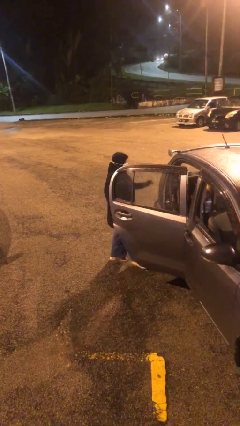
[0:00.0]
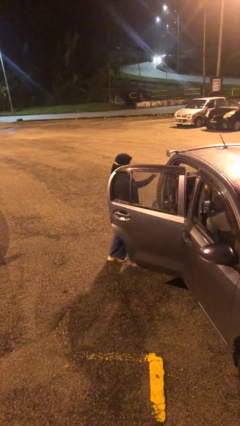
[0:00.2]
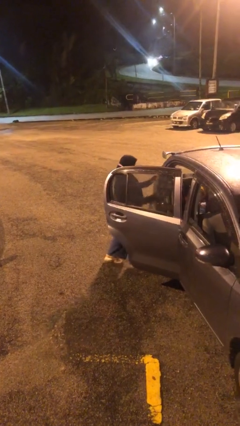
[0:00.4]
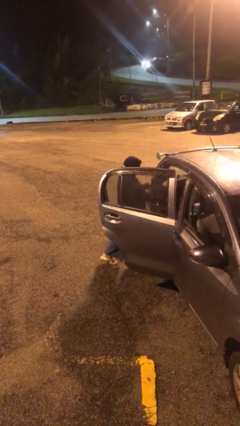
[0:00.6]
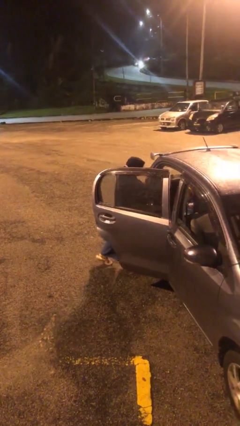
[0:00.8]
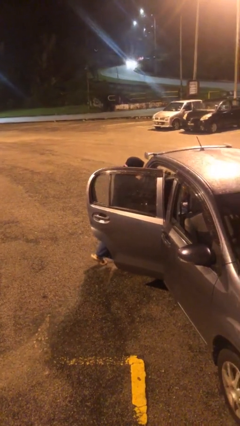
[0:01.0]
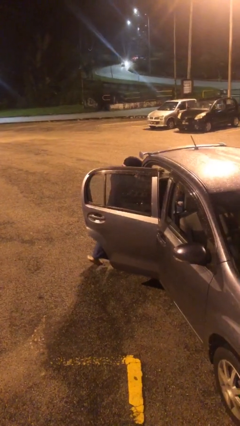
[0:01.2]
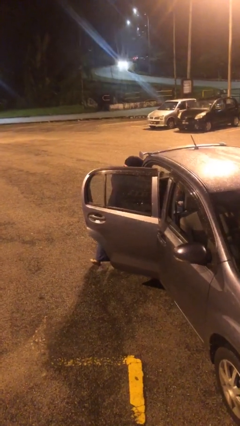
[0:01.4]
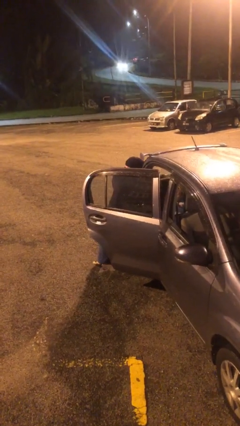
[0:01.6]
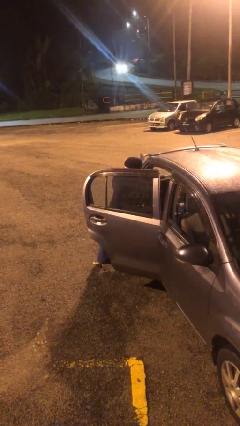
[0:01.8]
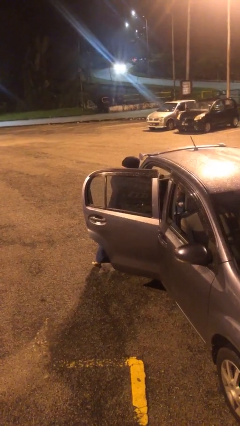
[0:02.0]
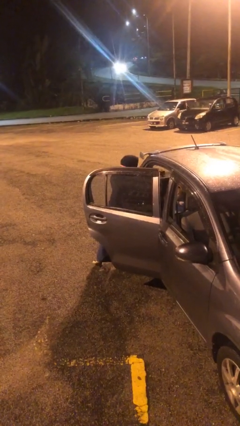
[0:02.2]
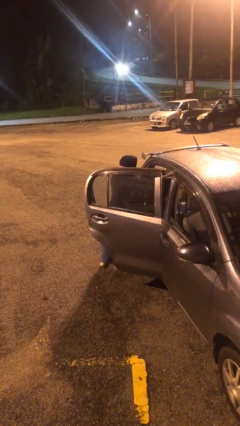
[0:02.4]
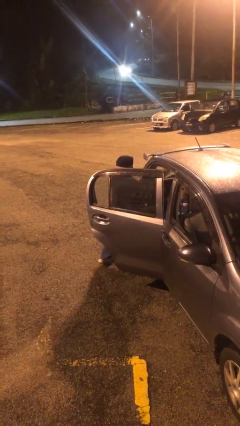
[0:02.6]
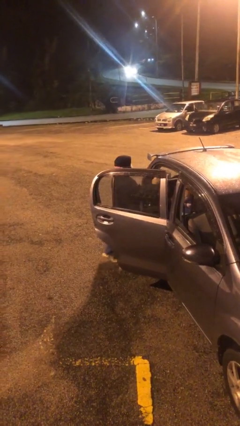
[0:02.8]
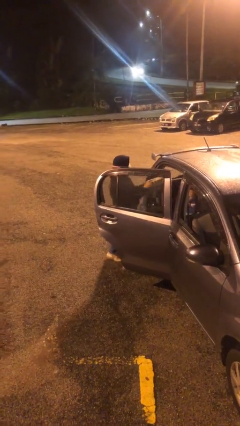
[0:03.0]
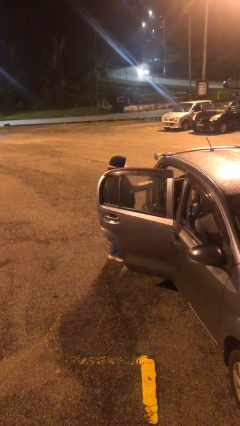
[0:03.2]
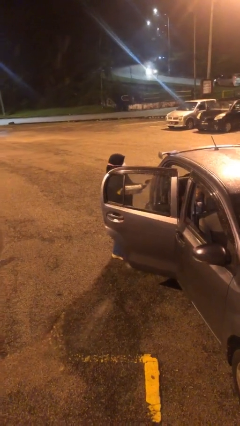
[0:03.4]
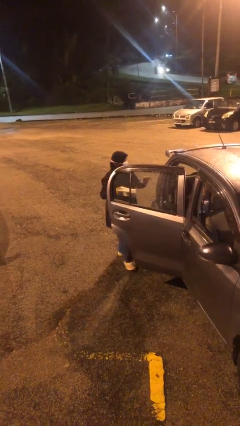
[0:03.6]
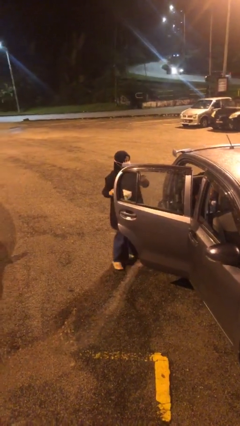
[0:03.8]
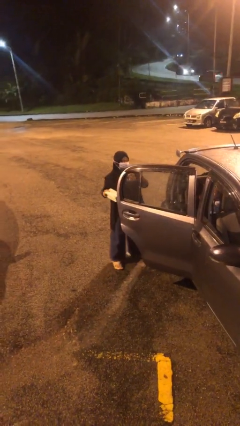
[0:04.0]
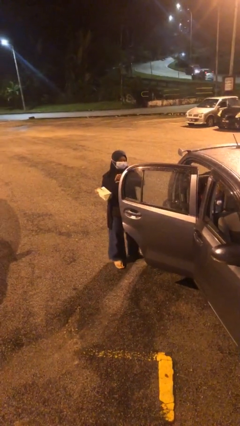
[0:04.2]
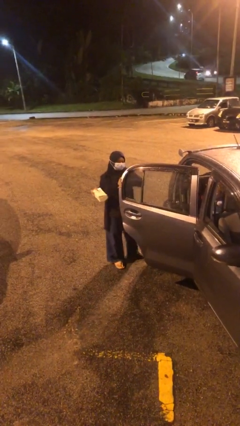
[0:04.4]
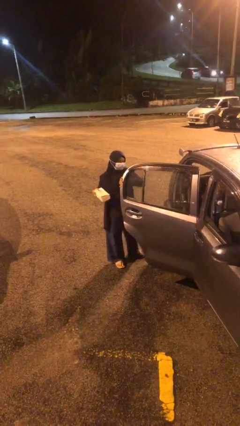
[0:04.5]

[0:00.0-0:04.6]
person unloads car

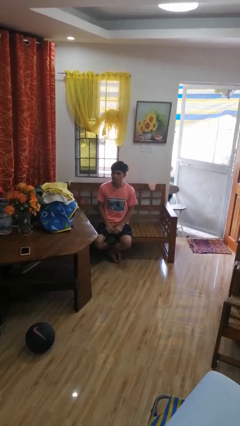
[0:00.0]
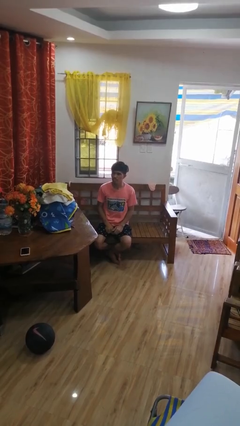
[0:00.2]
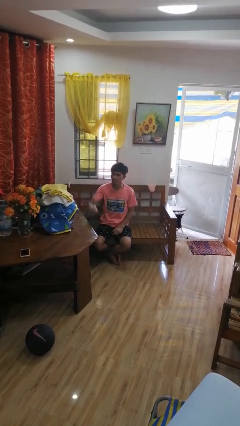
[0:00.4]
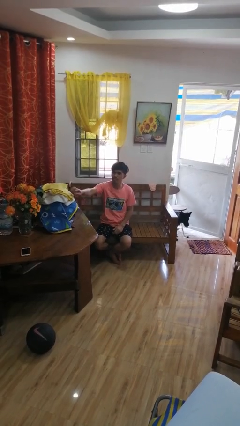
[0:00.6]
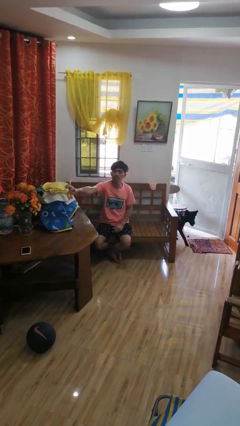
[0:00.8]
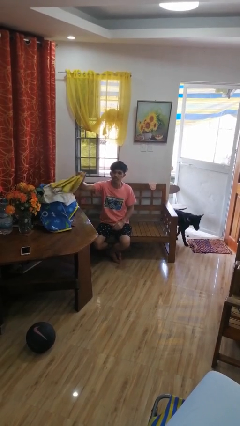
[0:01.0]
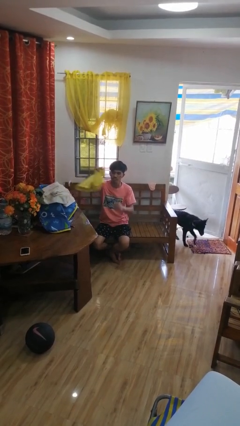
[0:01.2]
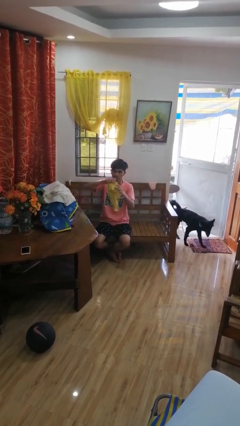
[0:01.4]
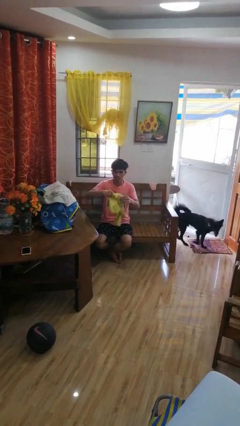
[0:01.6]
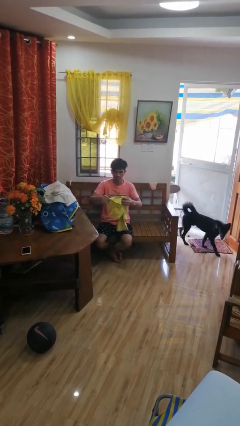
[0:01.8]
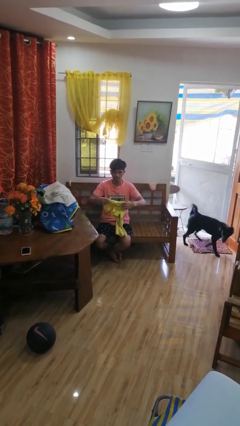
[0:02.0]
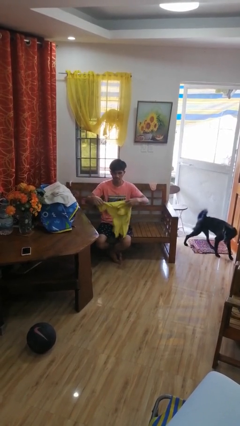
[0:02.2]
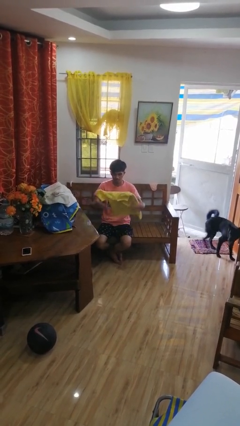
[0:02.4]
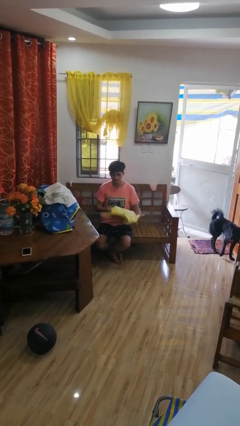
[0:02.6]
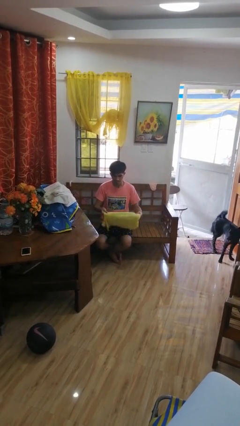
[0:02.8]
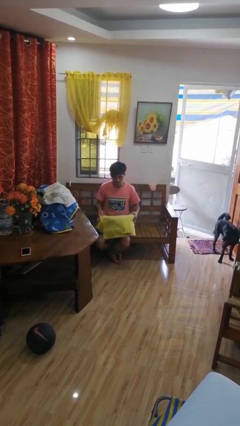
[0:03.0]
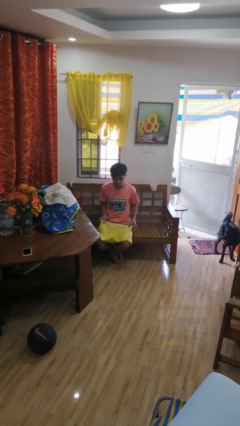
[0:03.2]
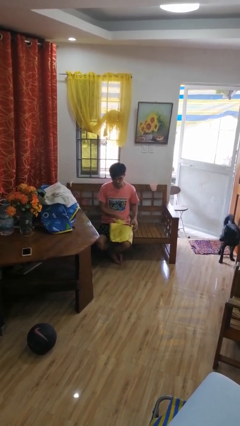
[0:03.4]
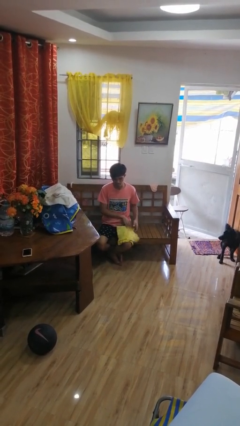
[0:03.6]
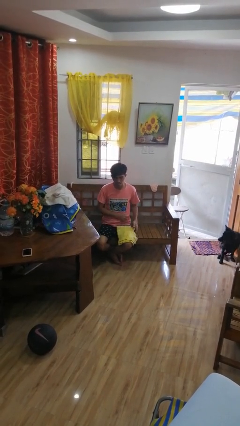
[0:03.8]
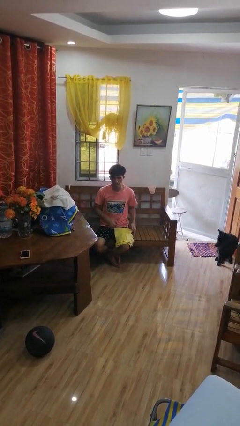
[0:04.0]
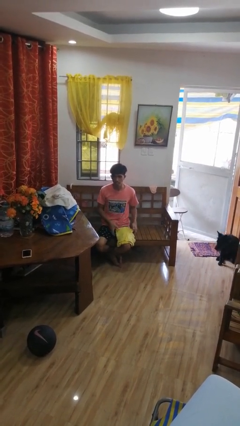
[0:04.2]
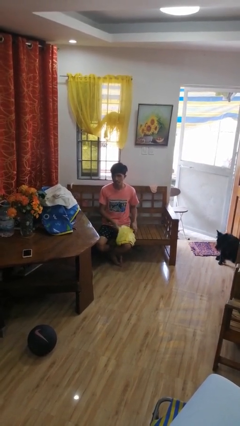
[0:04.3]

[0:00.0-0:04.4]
person folds shirt

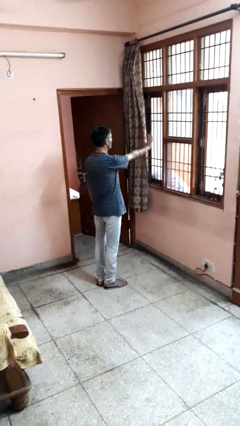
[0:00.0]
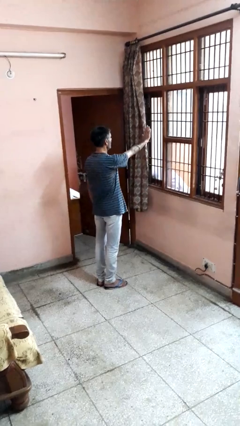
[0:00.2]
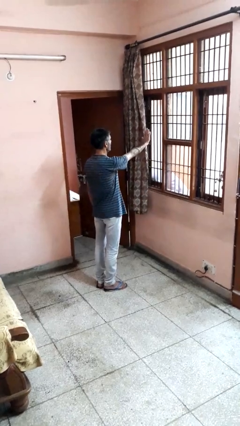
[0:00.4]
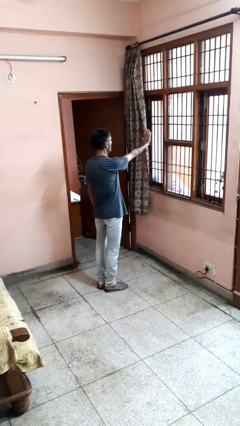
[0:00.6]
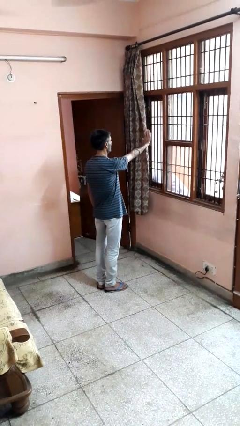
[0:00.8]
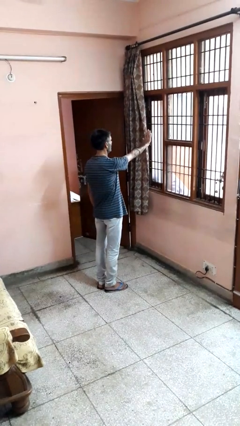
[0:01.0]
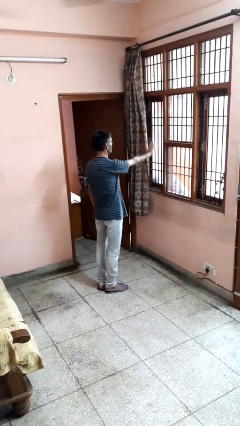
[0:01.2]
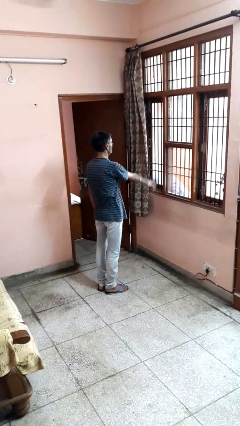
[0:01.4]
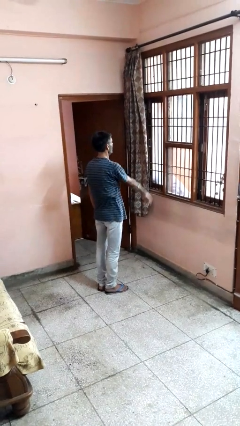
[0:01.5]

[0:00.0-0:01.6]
person gestures stop

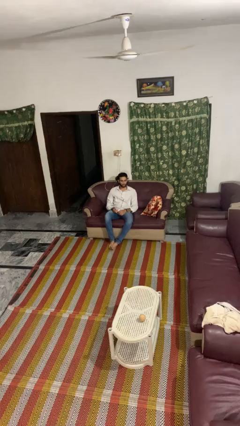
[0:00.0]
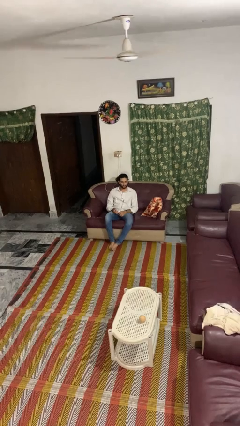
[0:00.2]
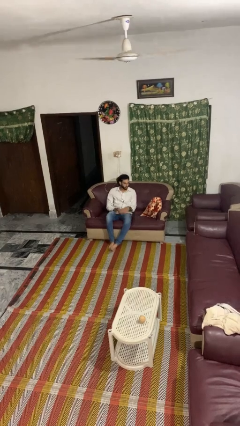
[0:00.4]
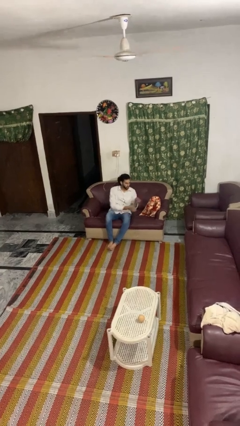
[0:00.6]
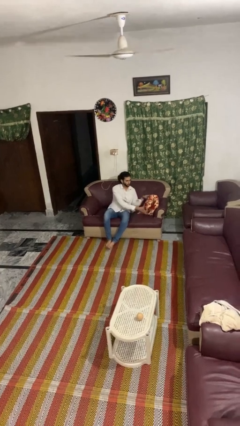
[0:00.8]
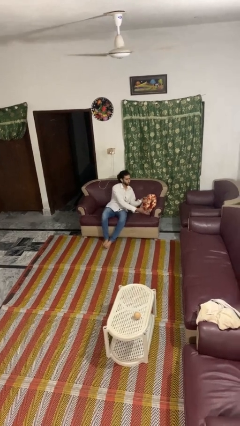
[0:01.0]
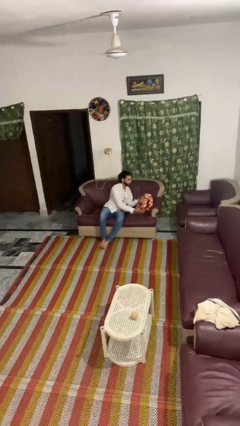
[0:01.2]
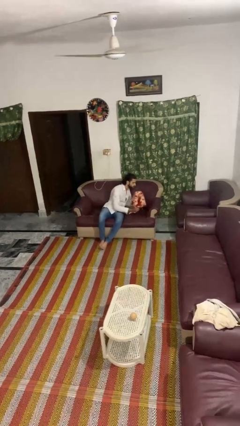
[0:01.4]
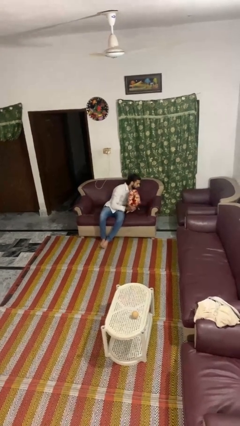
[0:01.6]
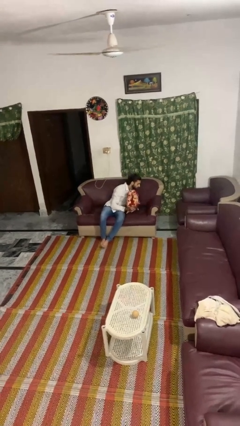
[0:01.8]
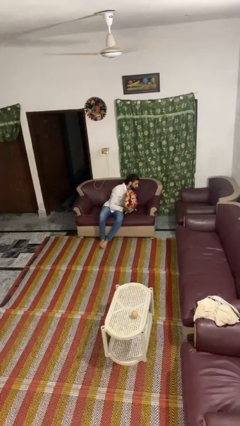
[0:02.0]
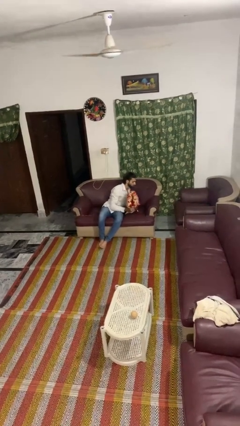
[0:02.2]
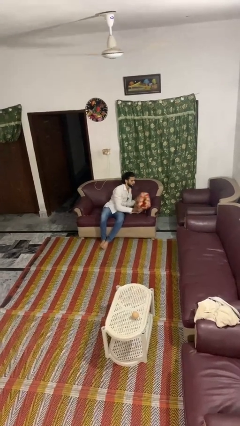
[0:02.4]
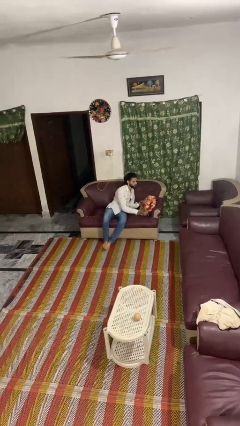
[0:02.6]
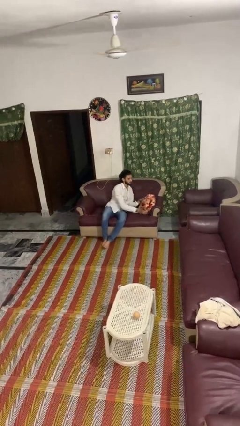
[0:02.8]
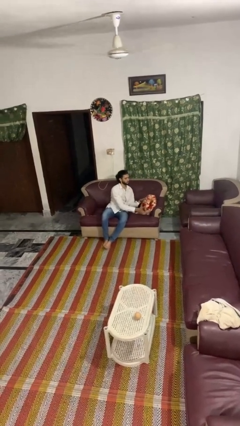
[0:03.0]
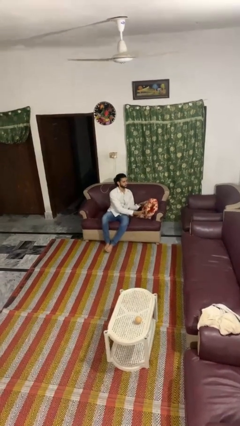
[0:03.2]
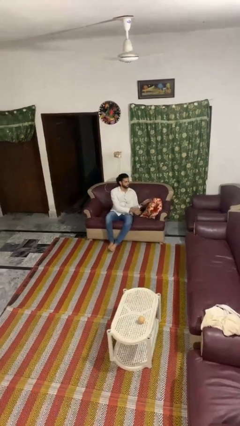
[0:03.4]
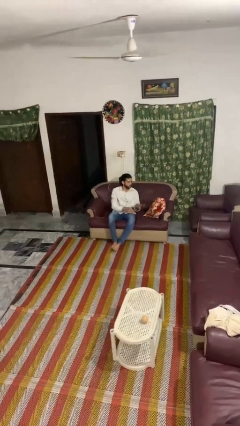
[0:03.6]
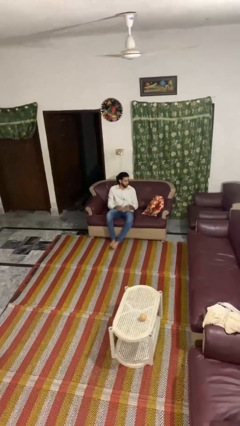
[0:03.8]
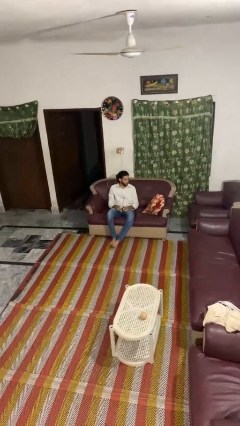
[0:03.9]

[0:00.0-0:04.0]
person searches in couch

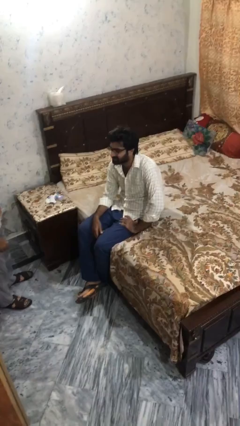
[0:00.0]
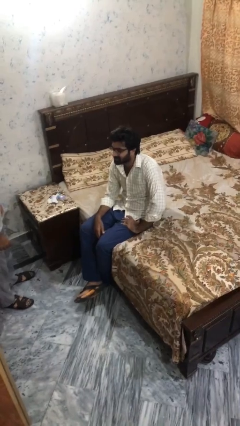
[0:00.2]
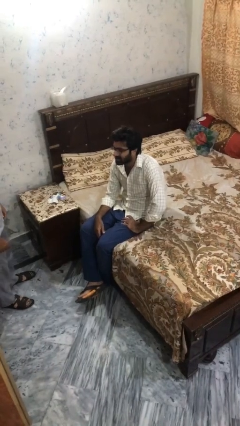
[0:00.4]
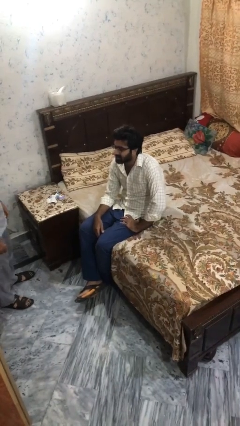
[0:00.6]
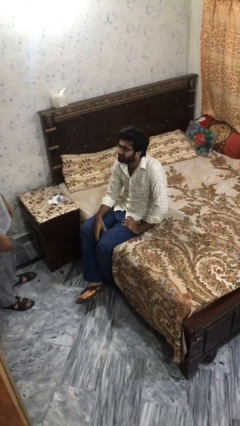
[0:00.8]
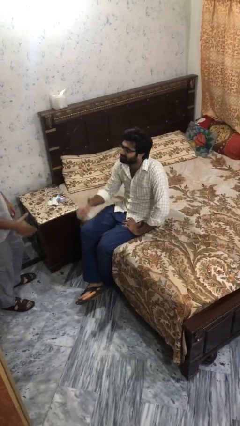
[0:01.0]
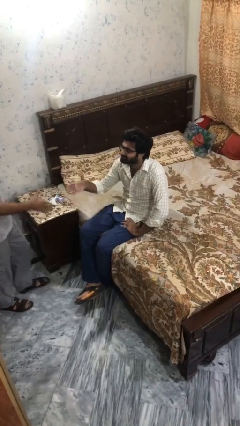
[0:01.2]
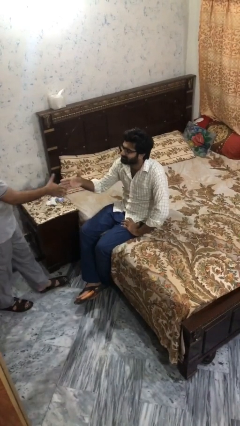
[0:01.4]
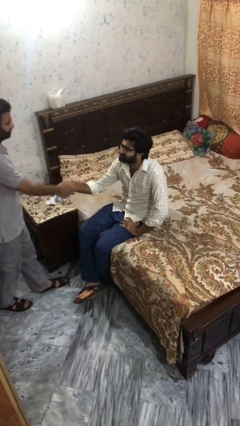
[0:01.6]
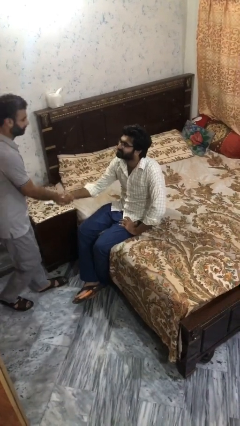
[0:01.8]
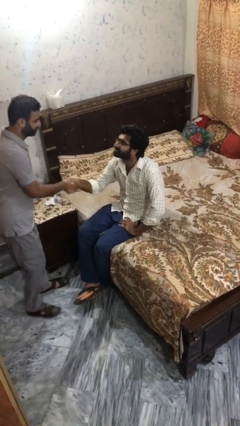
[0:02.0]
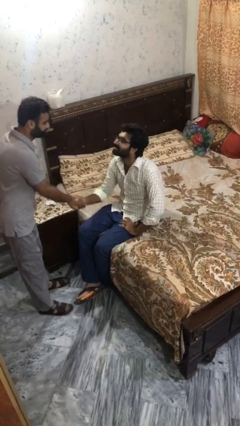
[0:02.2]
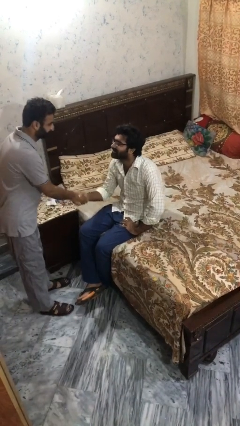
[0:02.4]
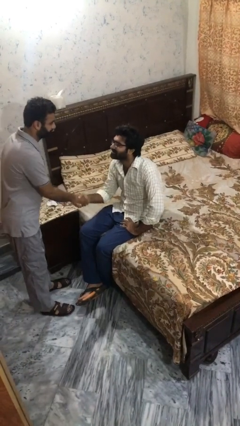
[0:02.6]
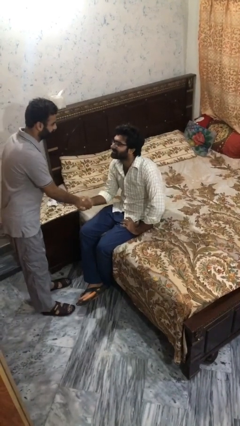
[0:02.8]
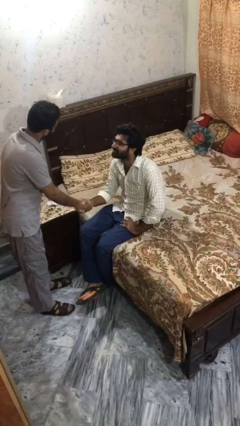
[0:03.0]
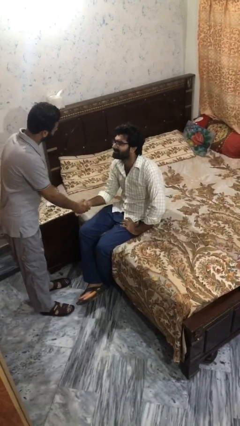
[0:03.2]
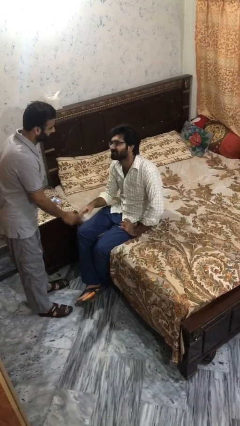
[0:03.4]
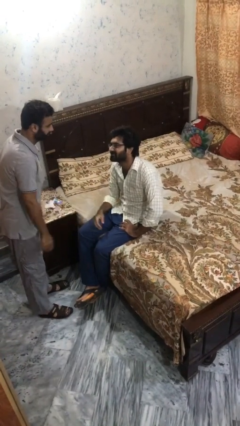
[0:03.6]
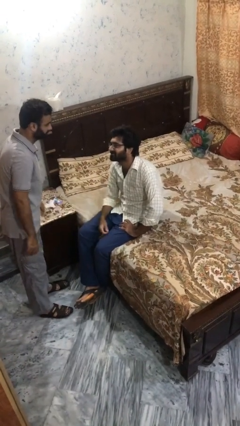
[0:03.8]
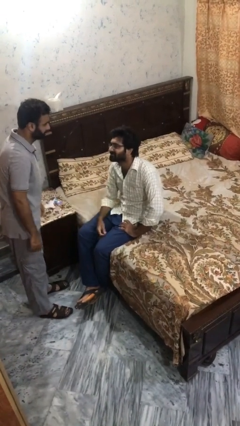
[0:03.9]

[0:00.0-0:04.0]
person shakes hand
